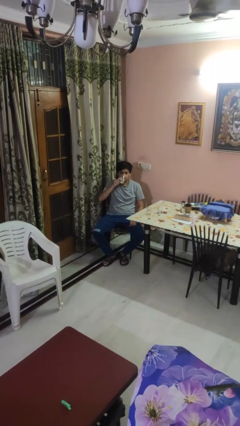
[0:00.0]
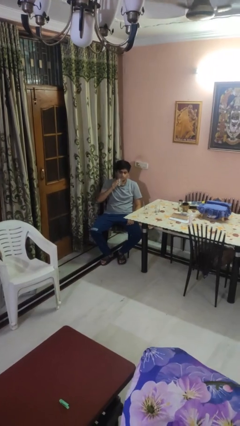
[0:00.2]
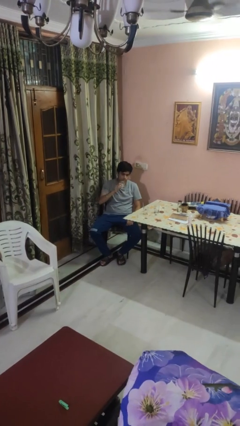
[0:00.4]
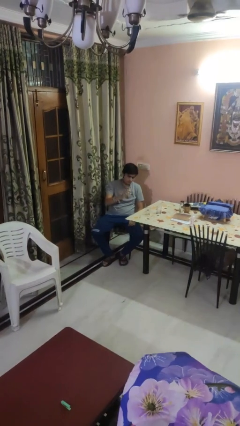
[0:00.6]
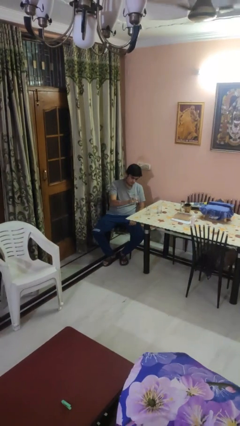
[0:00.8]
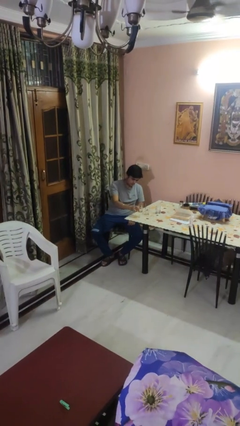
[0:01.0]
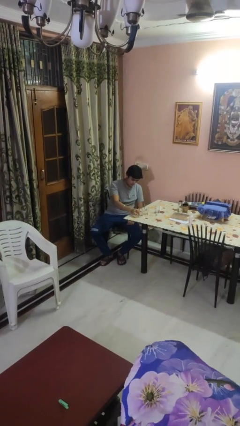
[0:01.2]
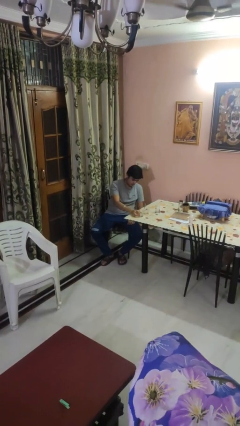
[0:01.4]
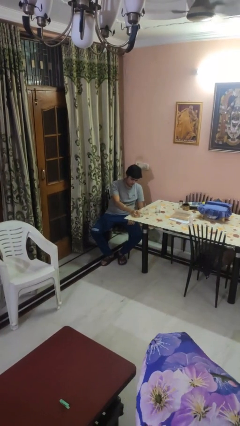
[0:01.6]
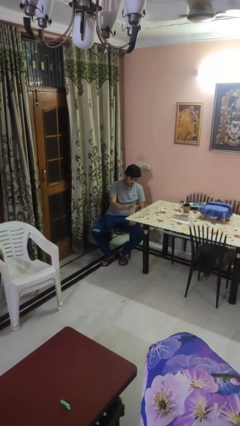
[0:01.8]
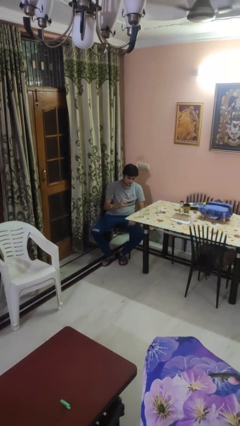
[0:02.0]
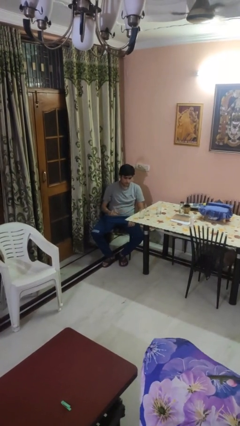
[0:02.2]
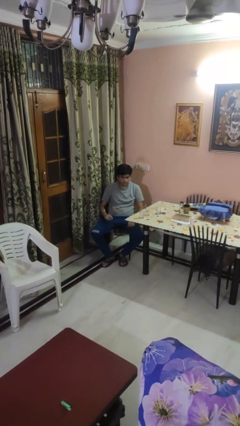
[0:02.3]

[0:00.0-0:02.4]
person puts down object on table

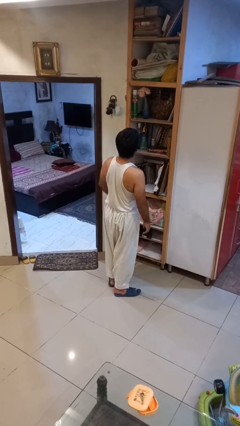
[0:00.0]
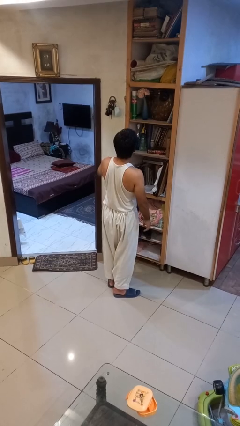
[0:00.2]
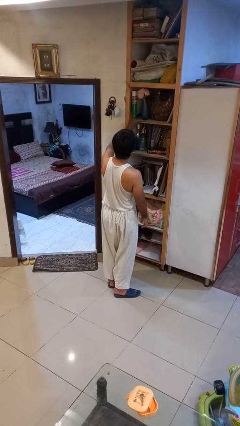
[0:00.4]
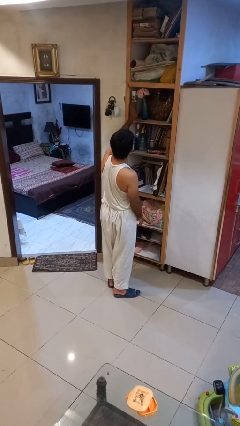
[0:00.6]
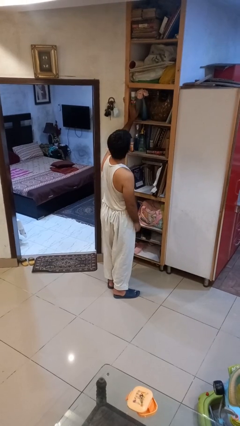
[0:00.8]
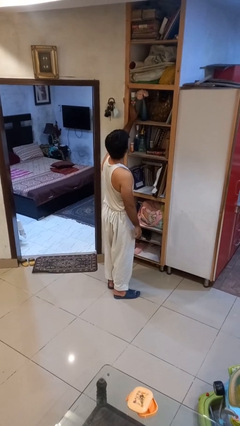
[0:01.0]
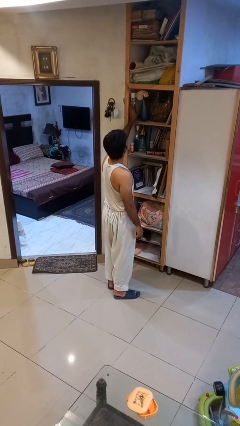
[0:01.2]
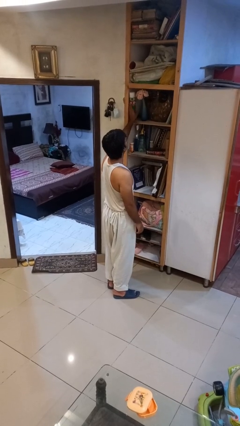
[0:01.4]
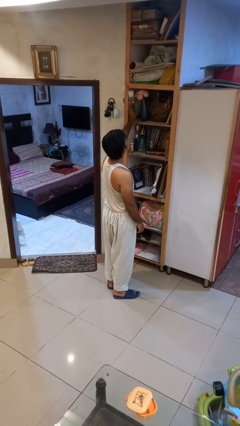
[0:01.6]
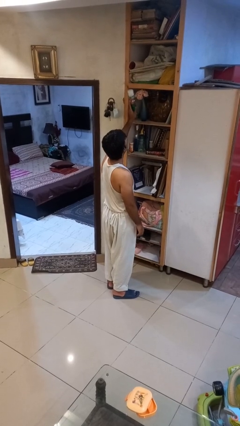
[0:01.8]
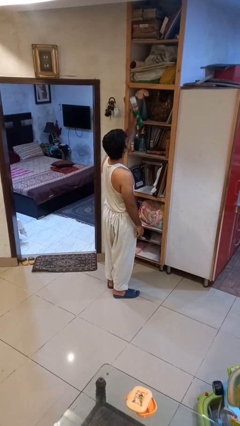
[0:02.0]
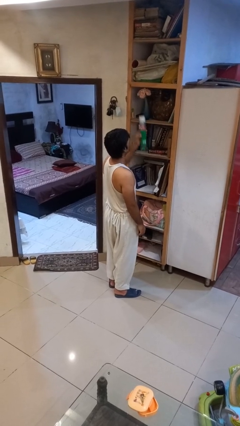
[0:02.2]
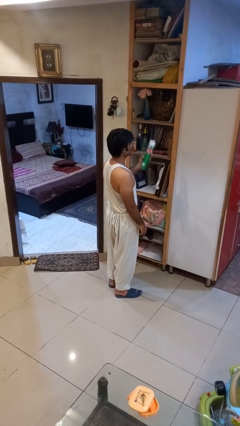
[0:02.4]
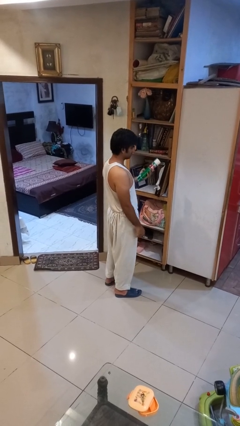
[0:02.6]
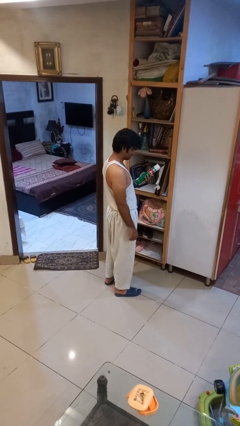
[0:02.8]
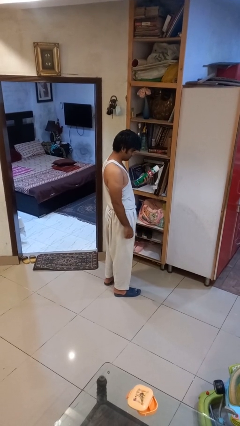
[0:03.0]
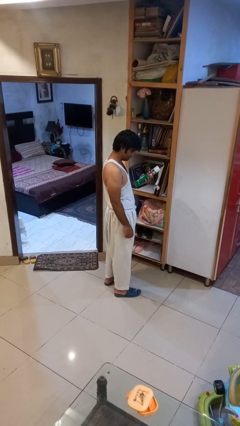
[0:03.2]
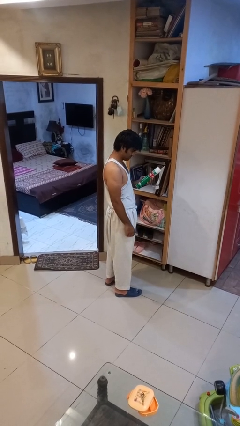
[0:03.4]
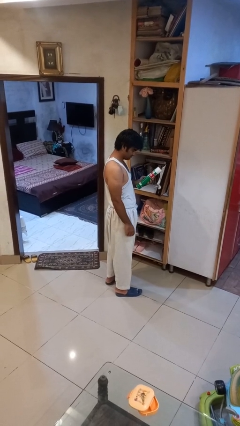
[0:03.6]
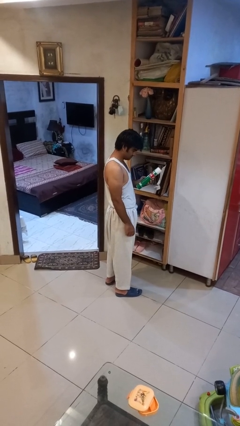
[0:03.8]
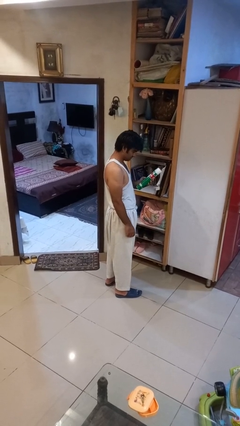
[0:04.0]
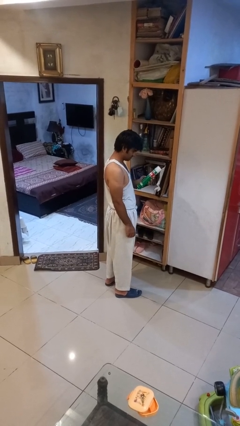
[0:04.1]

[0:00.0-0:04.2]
person picks up object from shelf

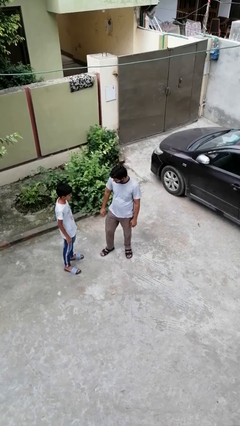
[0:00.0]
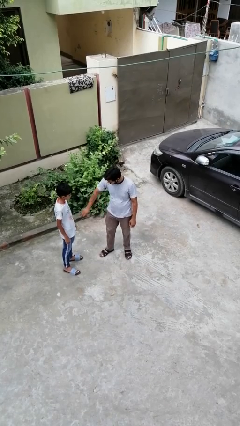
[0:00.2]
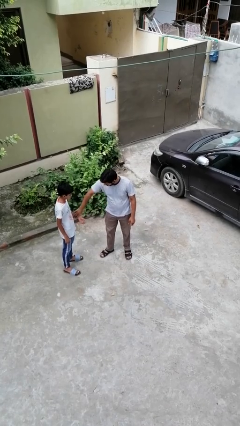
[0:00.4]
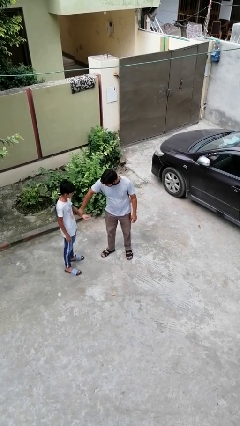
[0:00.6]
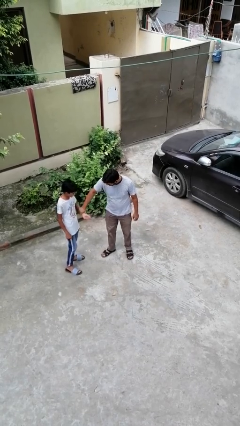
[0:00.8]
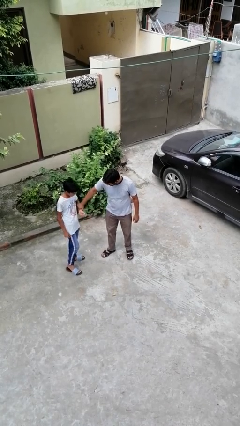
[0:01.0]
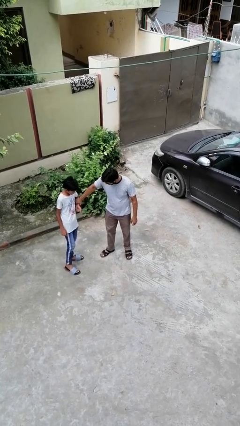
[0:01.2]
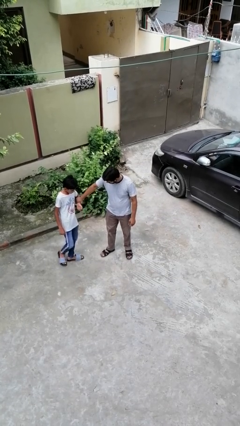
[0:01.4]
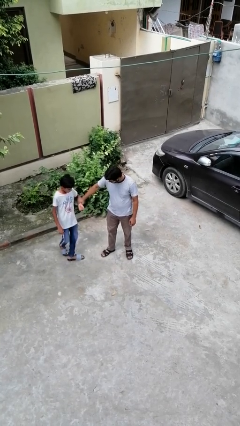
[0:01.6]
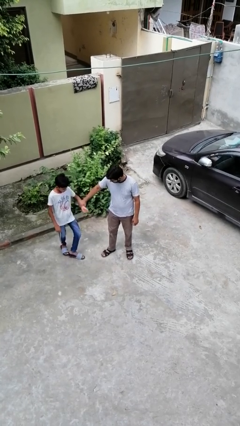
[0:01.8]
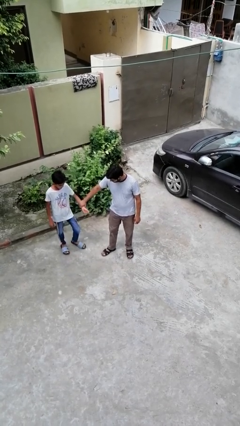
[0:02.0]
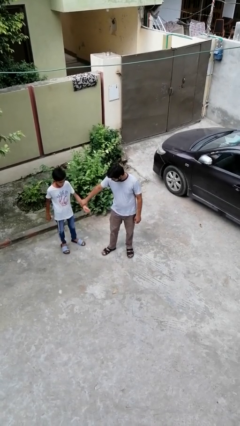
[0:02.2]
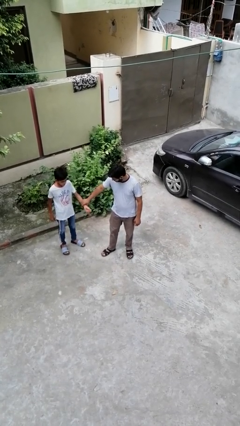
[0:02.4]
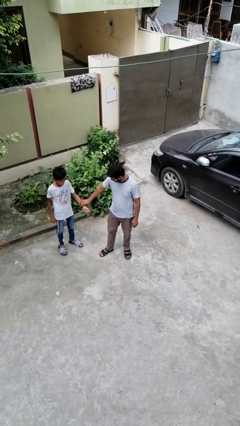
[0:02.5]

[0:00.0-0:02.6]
person grabs person by forearm

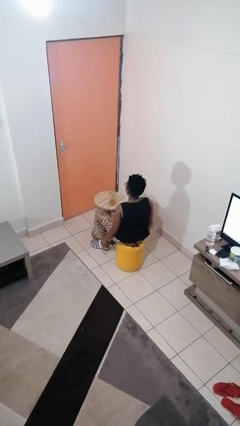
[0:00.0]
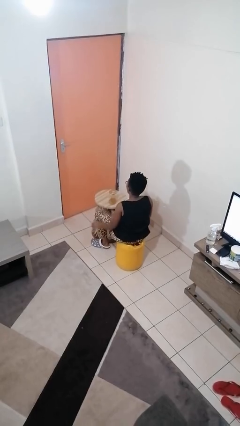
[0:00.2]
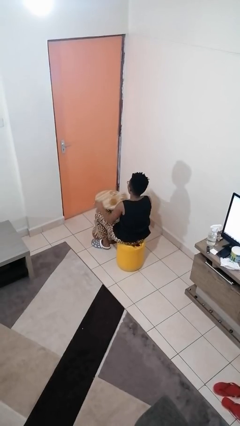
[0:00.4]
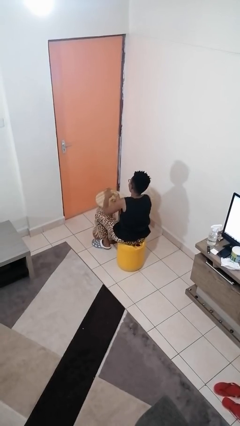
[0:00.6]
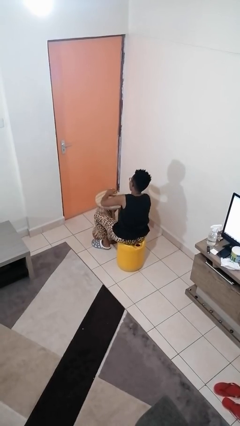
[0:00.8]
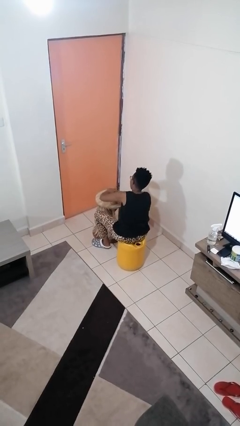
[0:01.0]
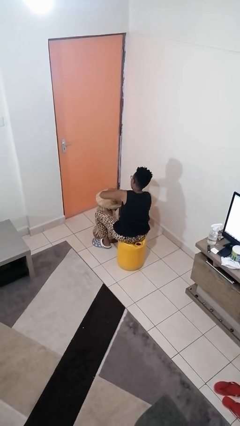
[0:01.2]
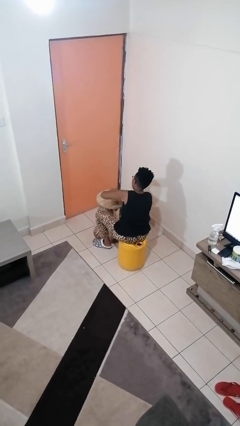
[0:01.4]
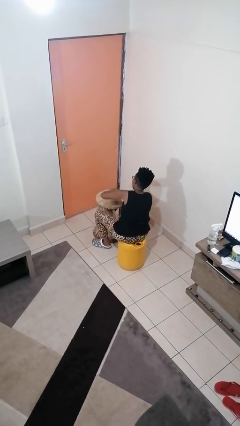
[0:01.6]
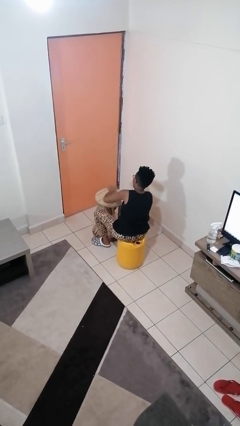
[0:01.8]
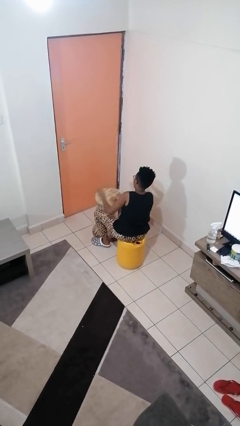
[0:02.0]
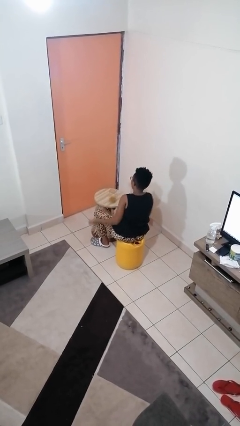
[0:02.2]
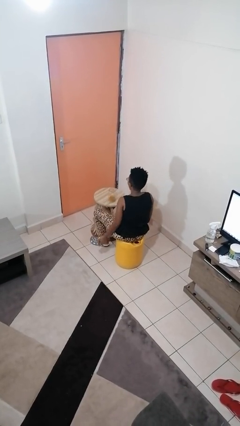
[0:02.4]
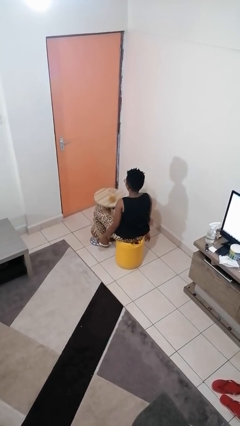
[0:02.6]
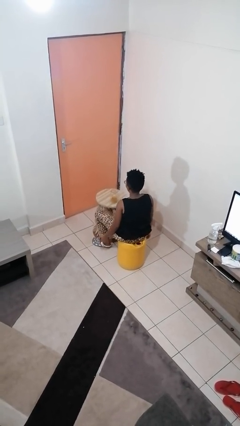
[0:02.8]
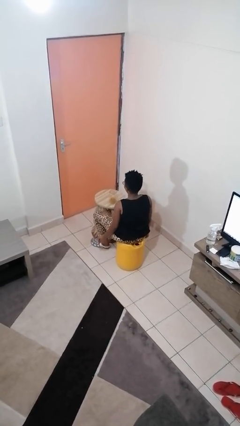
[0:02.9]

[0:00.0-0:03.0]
person opens jar

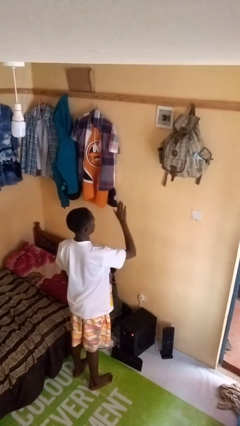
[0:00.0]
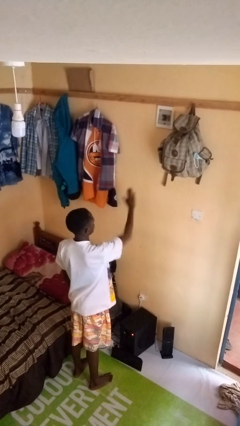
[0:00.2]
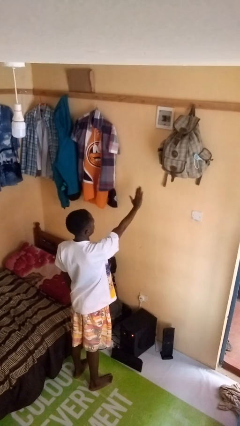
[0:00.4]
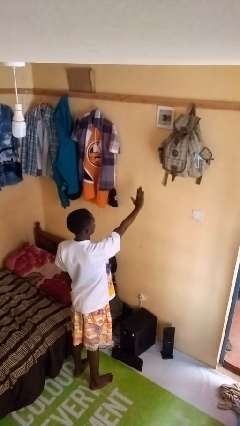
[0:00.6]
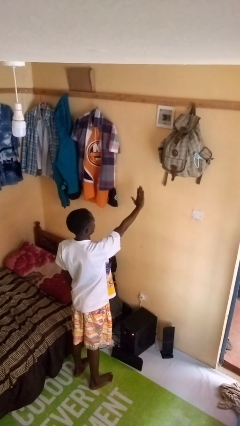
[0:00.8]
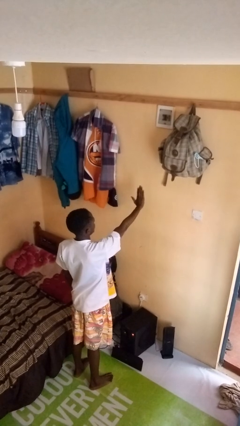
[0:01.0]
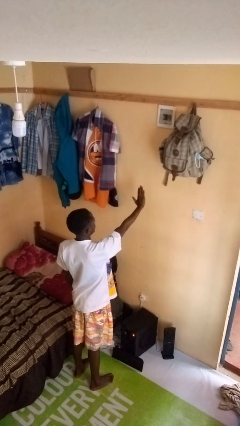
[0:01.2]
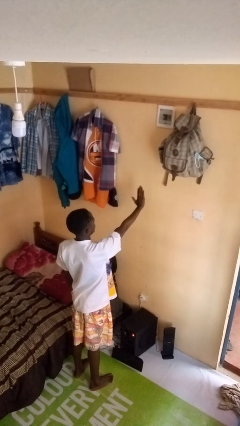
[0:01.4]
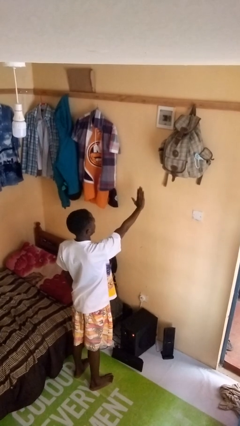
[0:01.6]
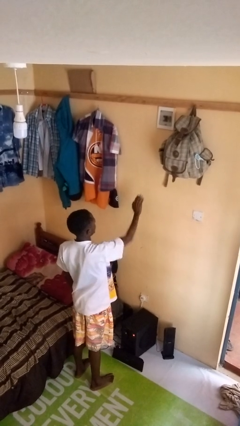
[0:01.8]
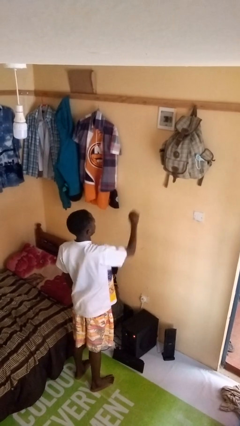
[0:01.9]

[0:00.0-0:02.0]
person gestures stop

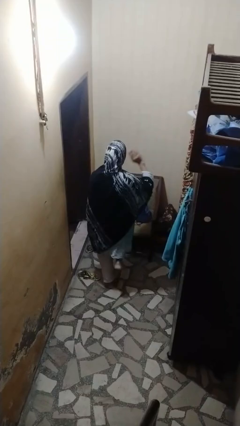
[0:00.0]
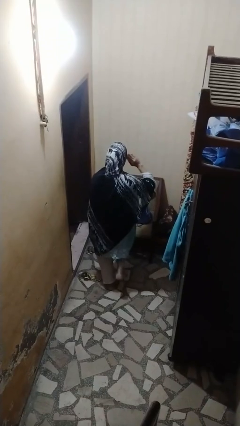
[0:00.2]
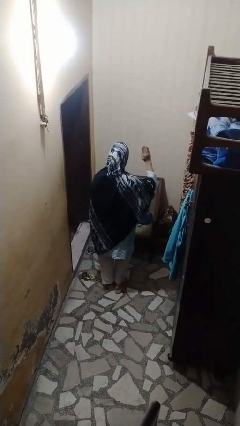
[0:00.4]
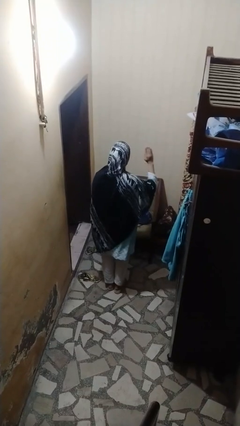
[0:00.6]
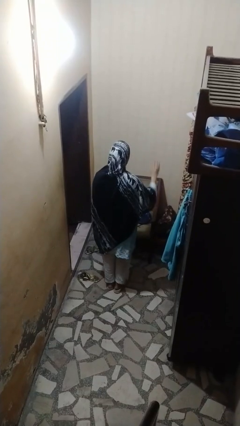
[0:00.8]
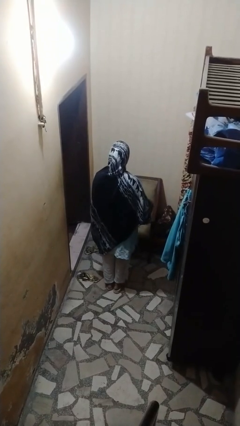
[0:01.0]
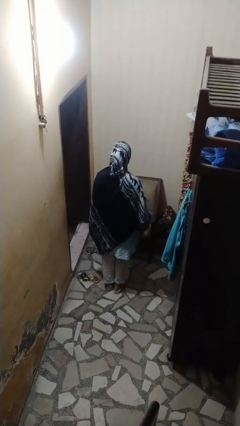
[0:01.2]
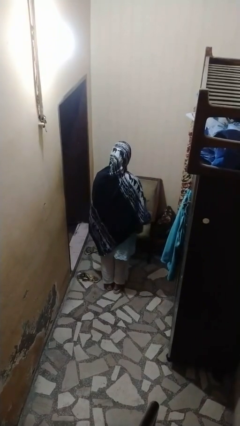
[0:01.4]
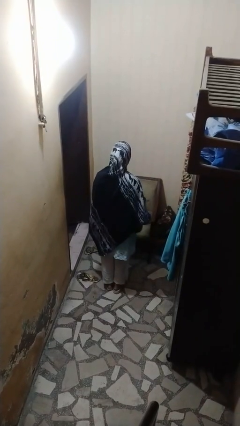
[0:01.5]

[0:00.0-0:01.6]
person salutes

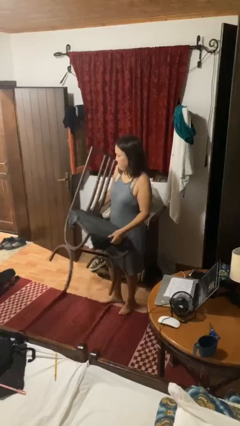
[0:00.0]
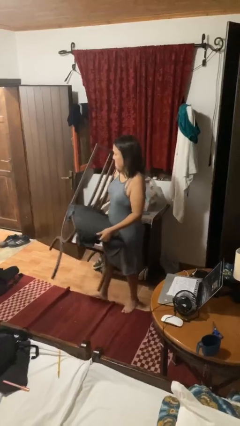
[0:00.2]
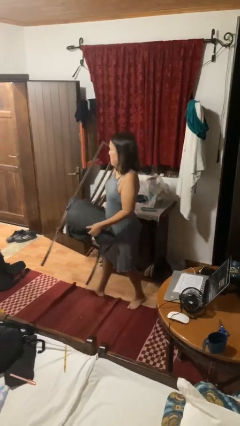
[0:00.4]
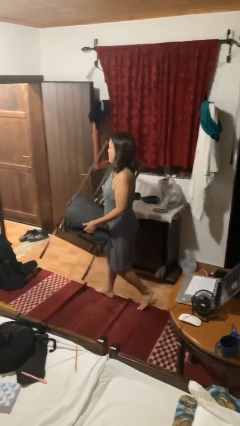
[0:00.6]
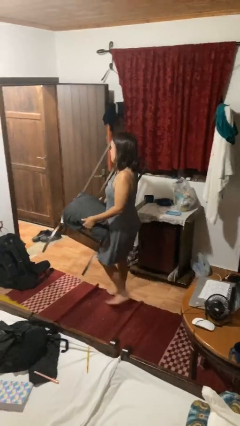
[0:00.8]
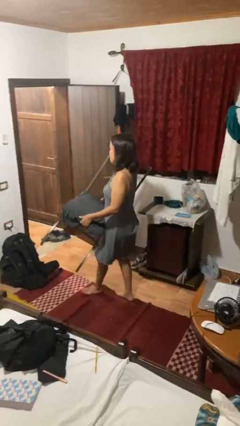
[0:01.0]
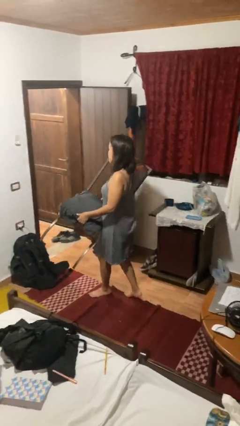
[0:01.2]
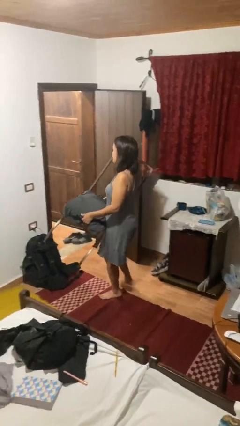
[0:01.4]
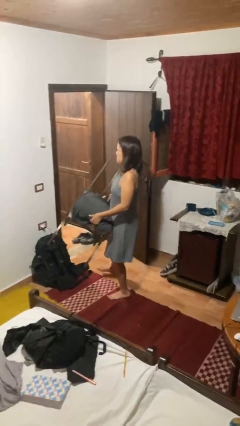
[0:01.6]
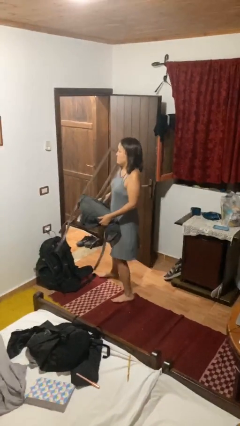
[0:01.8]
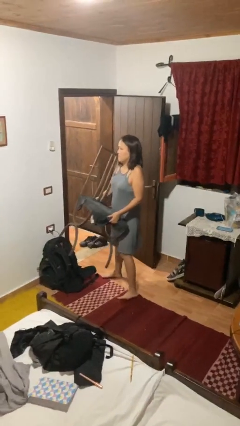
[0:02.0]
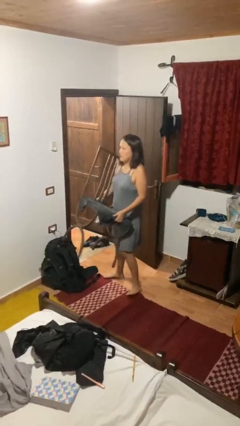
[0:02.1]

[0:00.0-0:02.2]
person carries furniture
